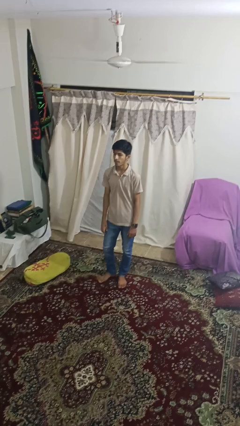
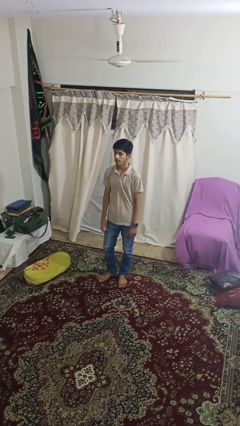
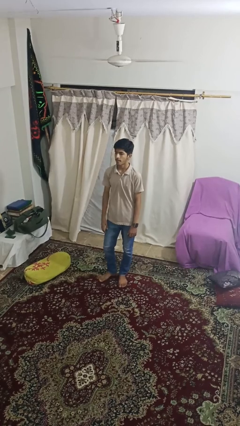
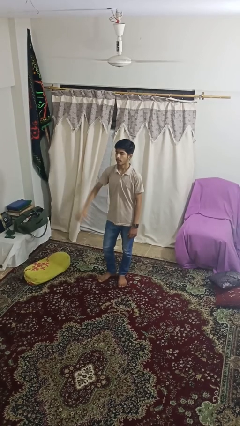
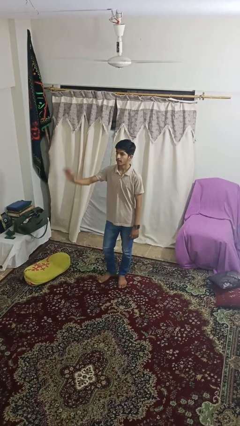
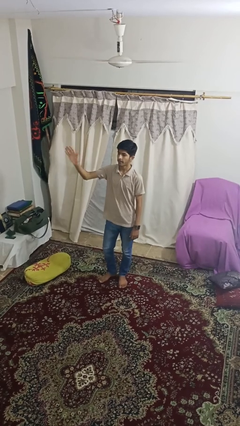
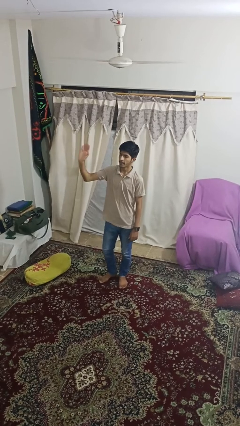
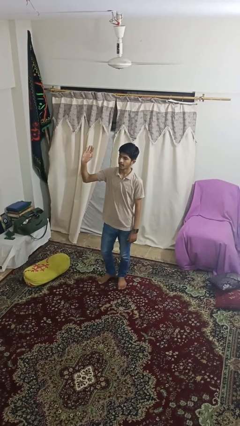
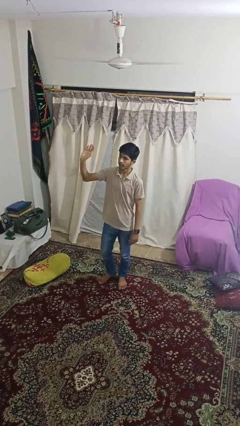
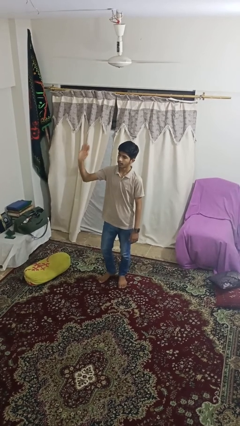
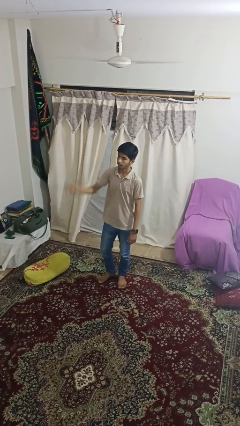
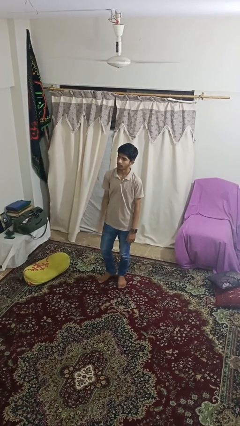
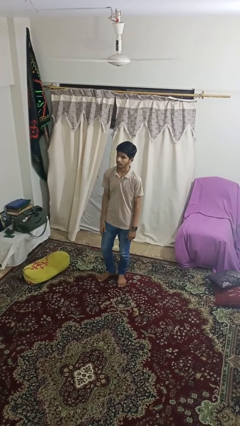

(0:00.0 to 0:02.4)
person waves at person

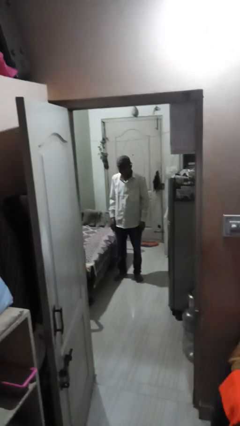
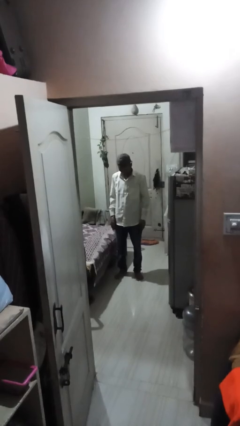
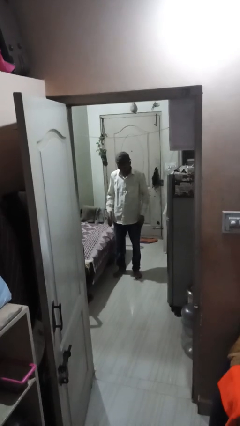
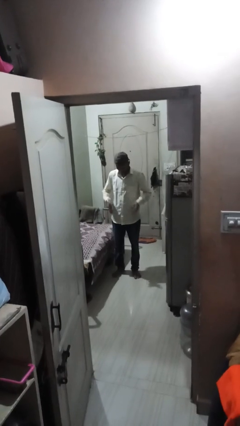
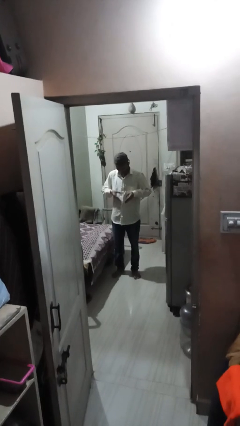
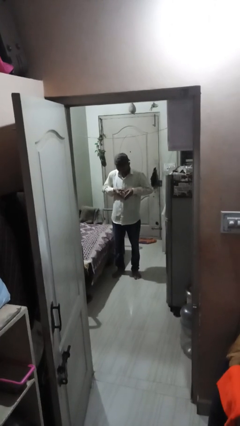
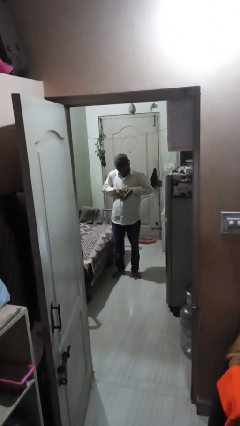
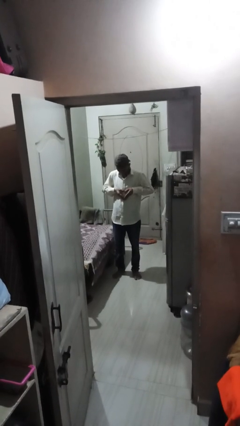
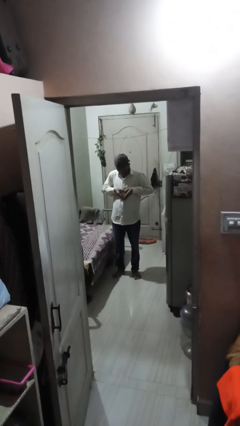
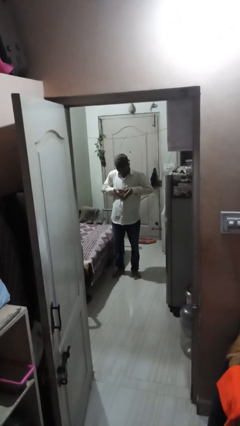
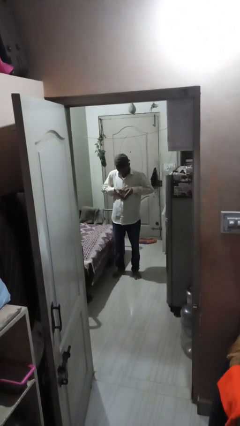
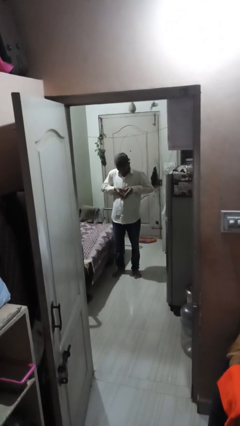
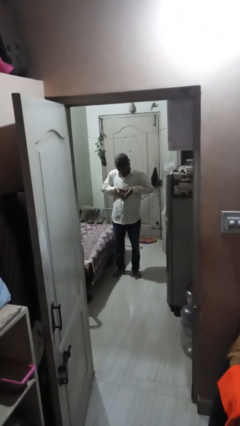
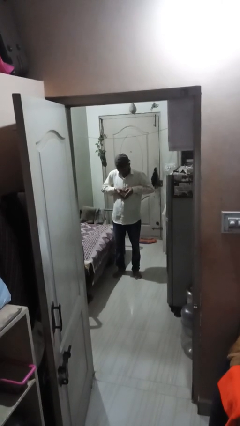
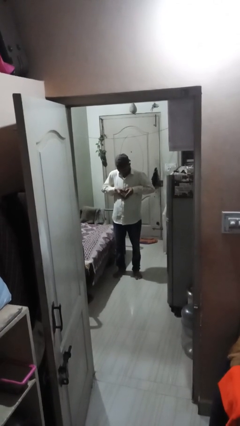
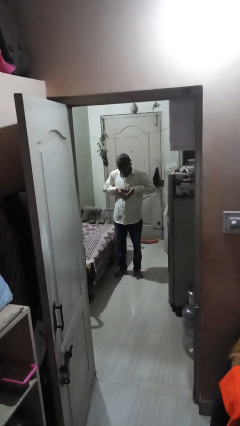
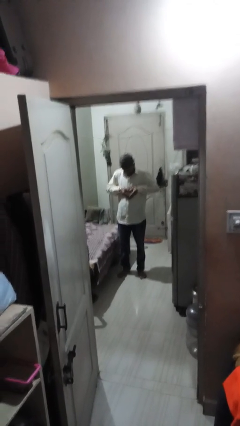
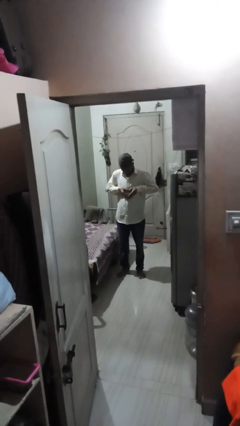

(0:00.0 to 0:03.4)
person gestures heart

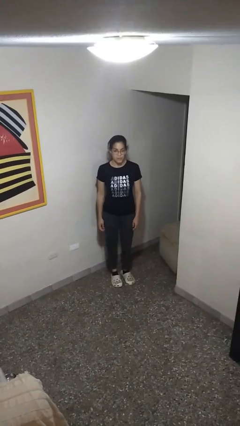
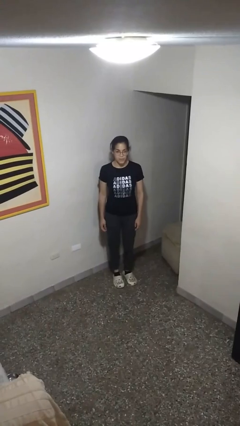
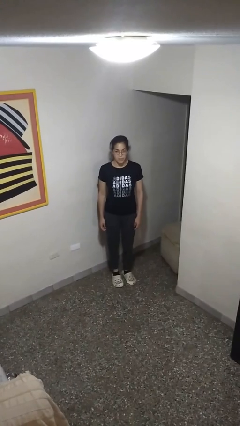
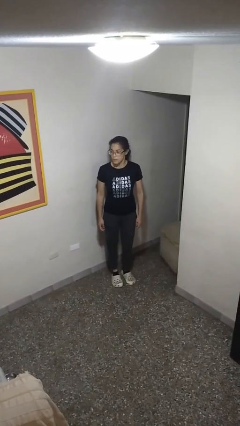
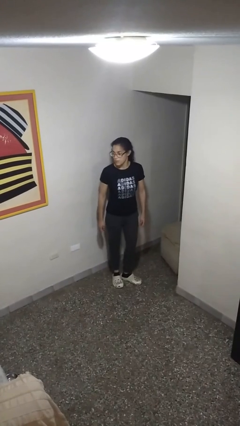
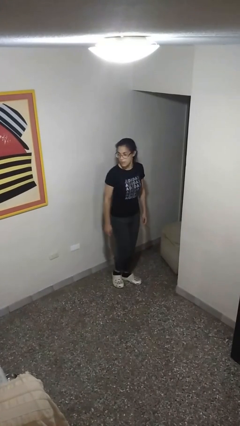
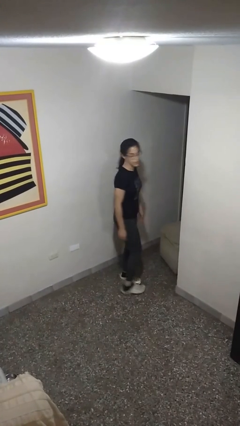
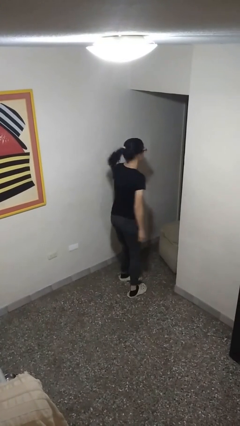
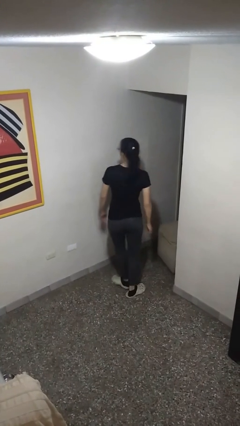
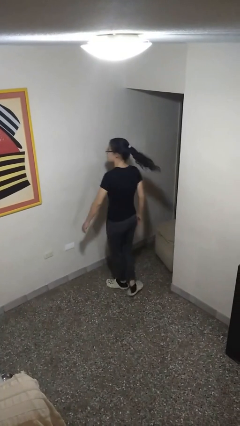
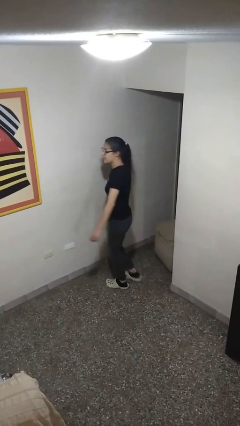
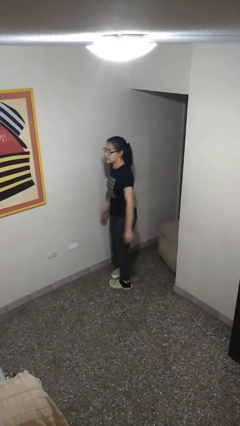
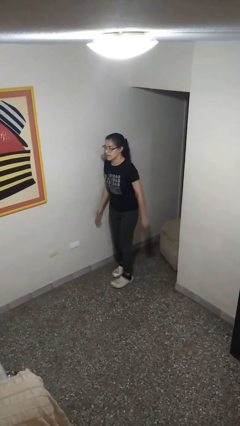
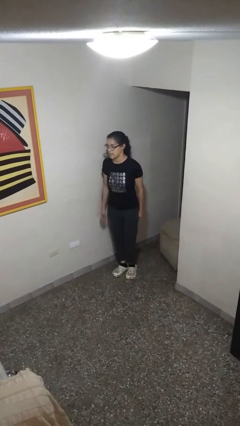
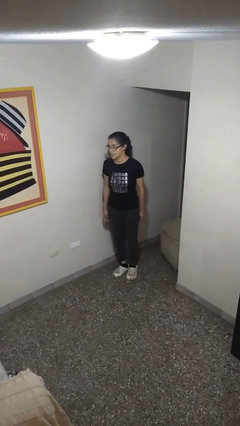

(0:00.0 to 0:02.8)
person twirls

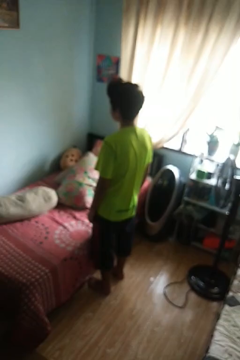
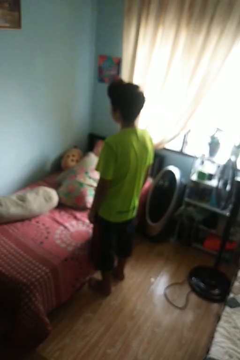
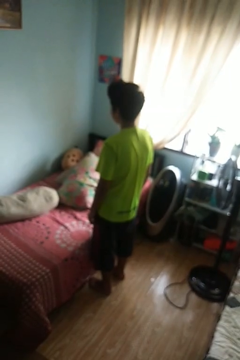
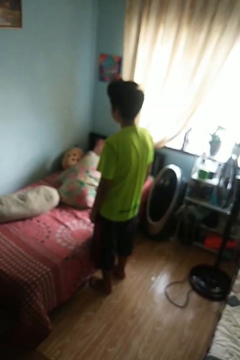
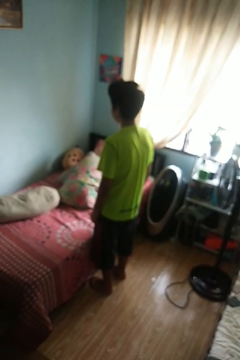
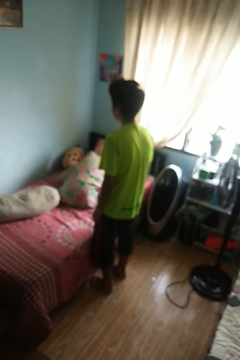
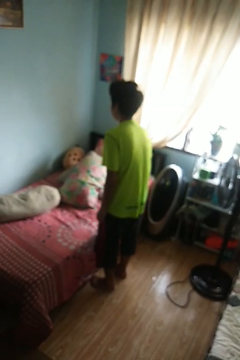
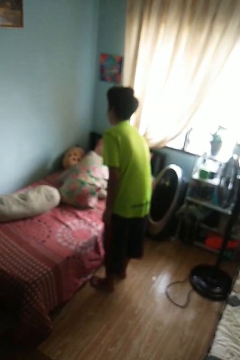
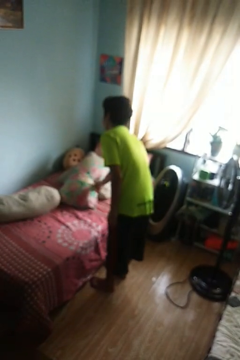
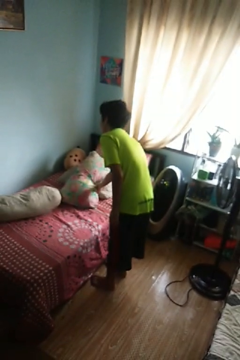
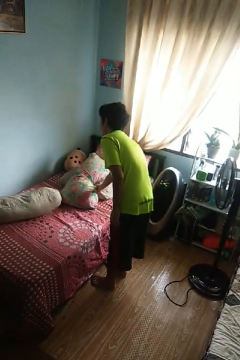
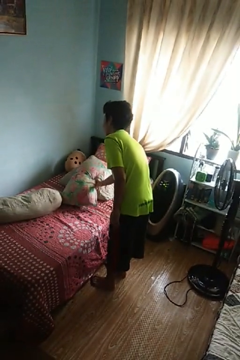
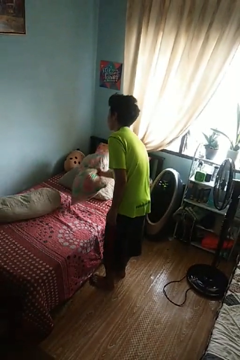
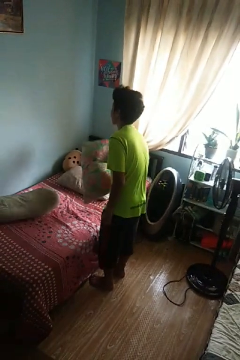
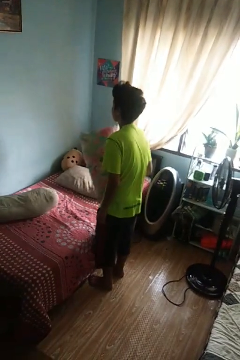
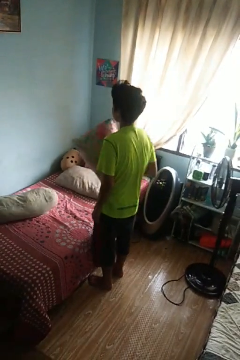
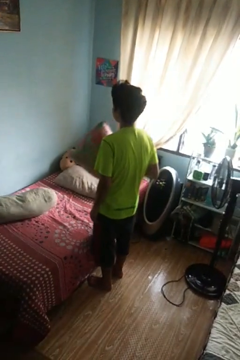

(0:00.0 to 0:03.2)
person picks up object from bed

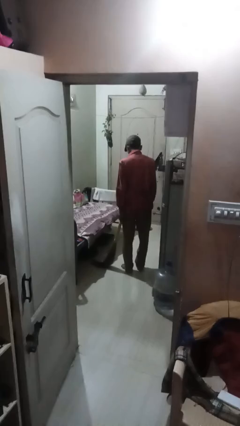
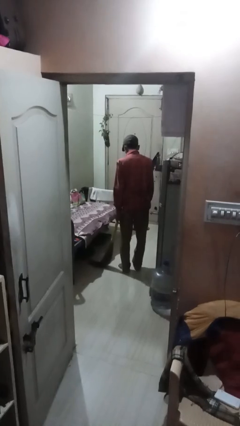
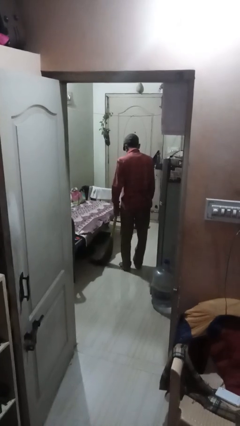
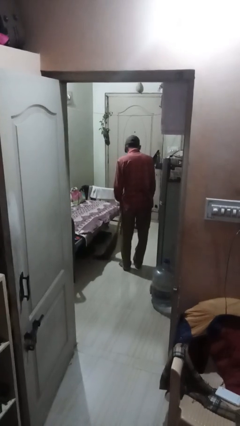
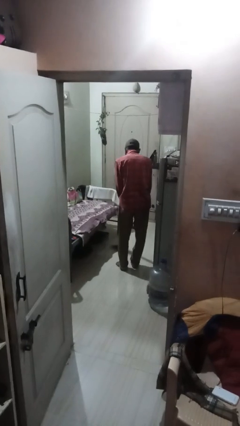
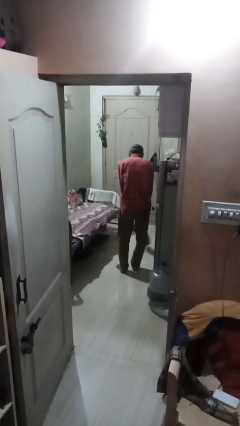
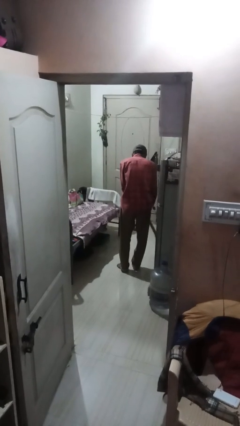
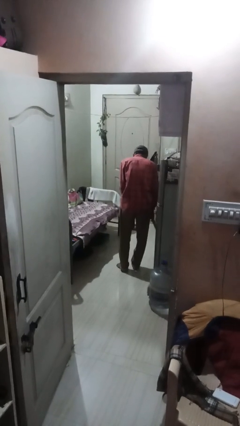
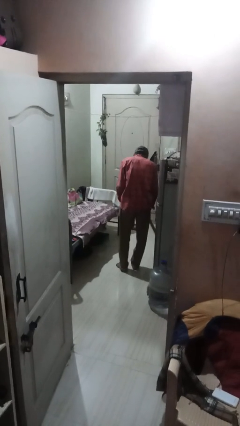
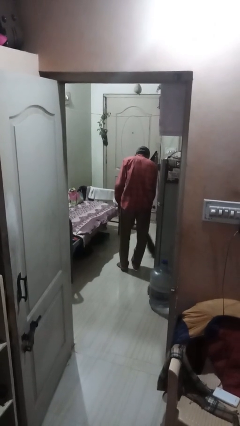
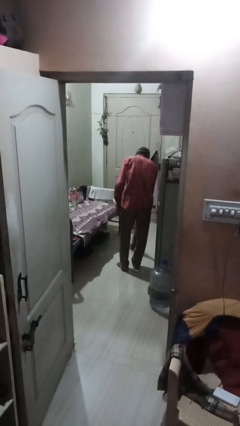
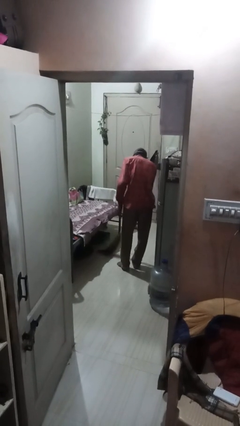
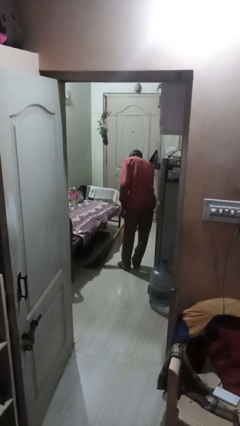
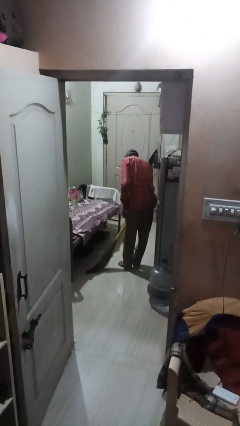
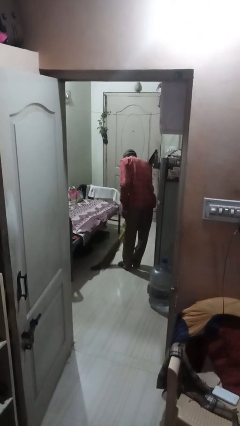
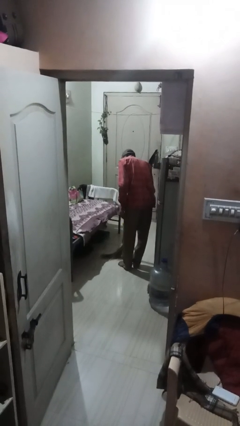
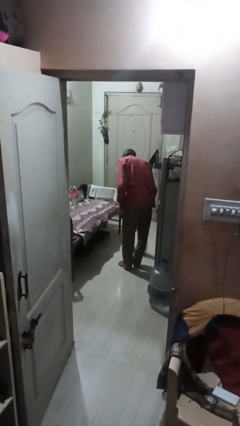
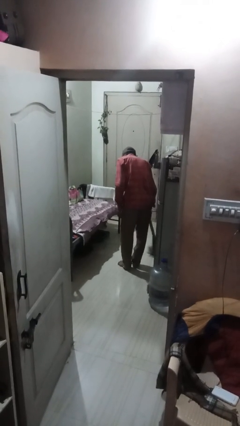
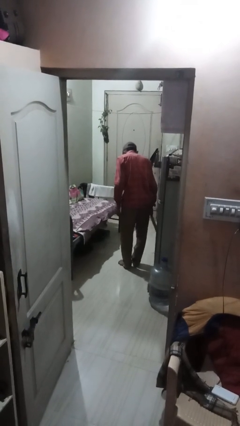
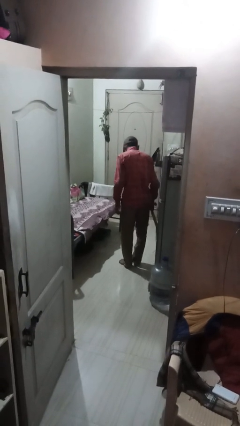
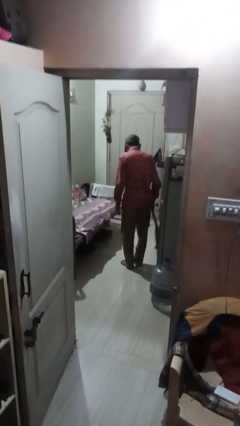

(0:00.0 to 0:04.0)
person sweeps floor

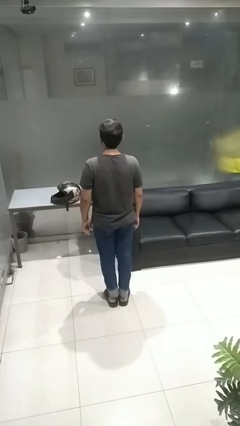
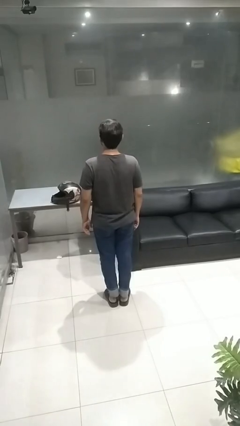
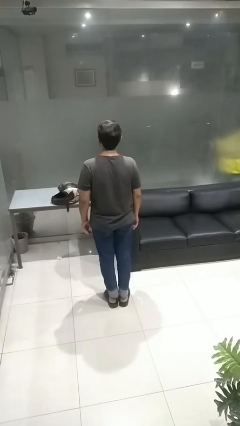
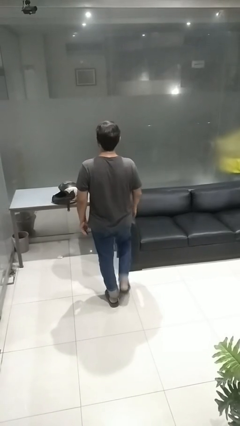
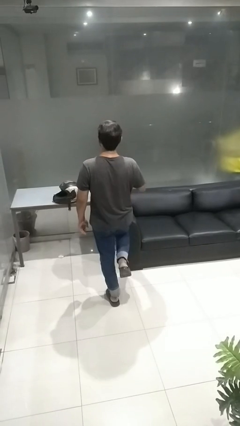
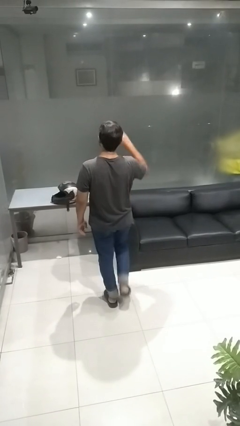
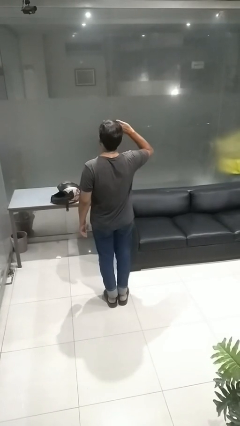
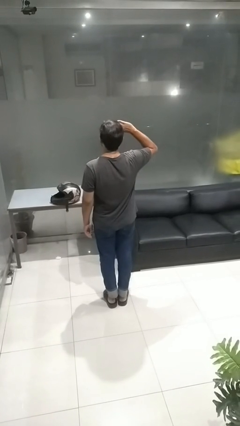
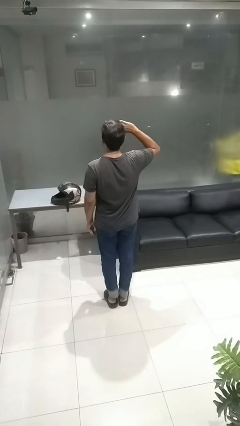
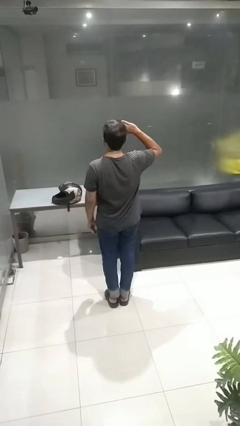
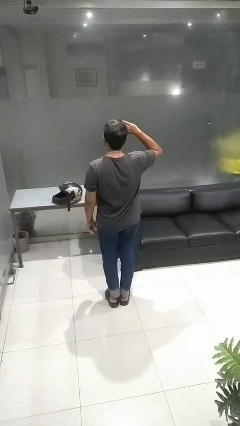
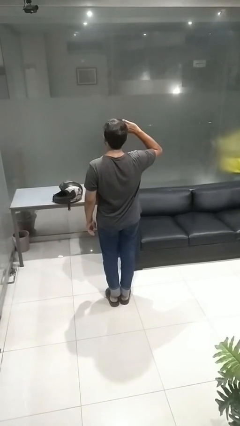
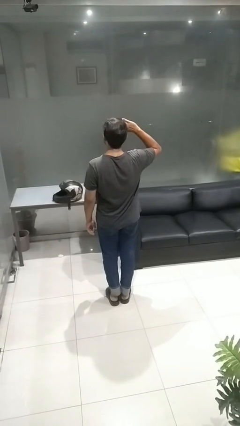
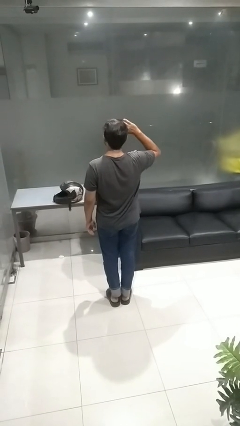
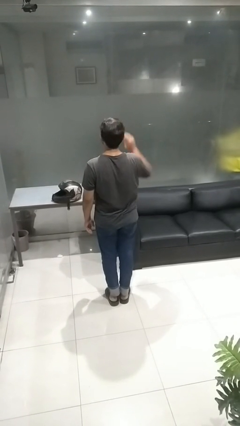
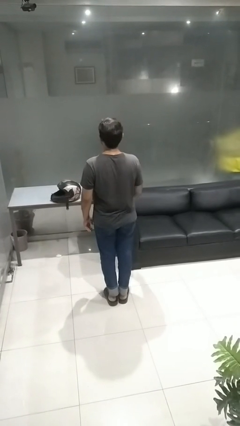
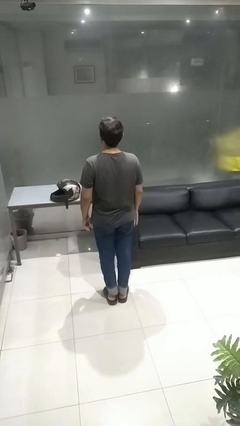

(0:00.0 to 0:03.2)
person salutes
